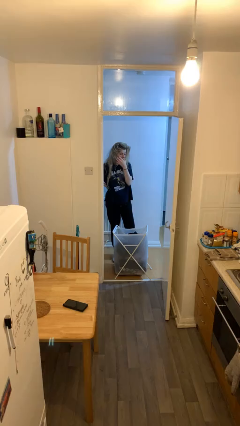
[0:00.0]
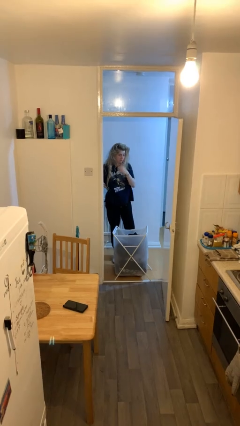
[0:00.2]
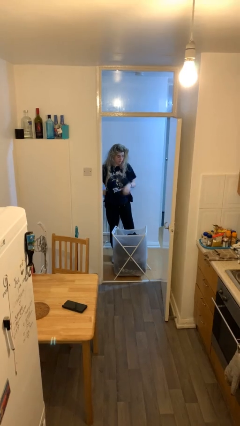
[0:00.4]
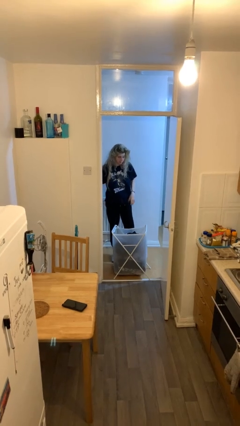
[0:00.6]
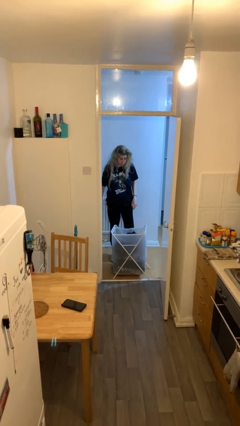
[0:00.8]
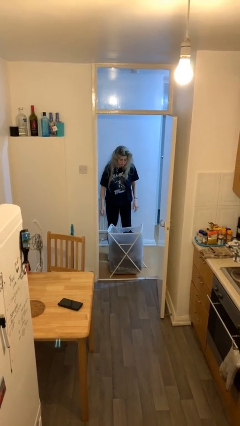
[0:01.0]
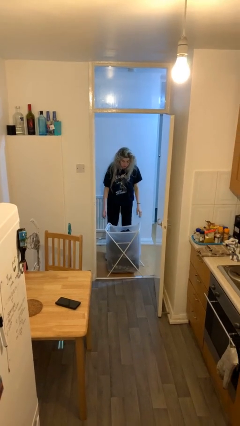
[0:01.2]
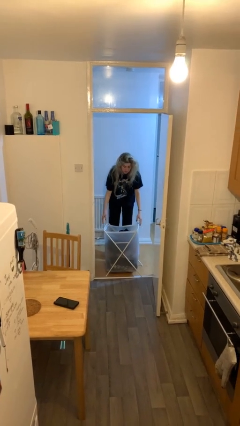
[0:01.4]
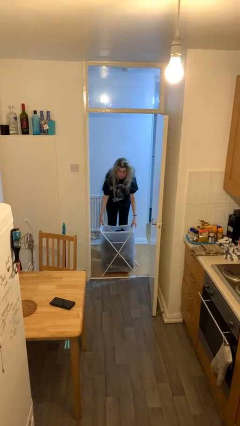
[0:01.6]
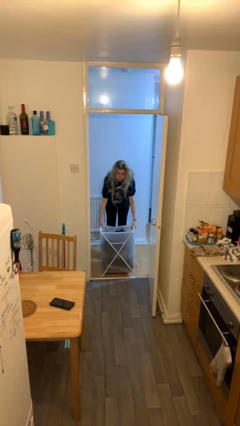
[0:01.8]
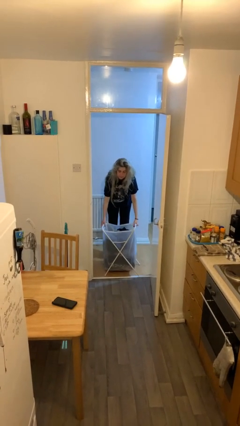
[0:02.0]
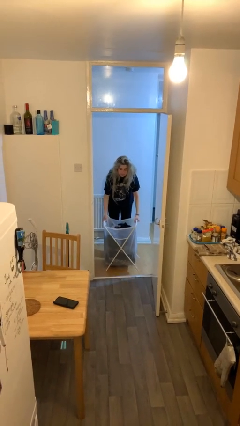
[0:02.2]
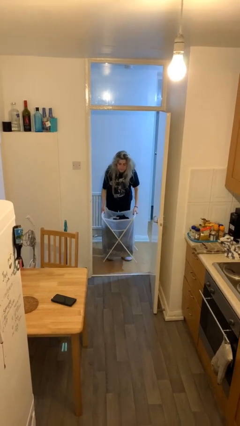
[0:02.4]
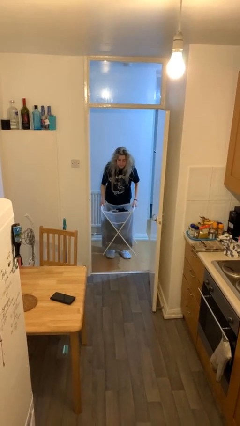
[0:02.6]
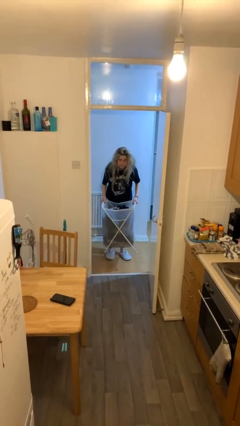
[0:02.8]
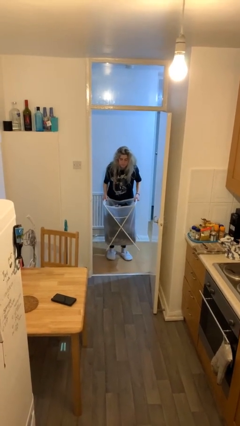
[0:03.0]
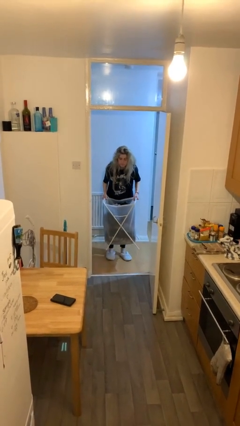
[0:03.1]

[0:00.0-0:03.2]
person picks up object from floor

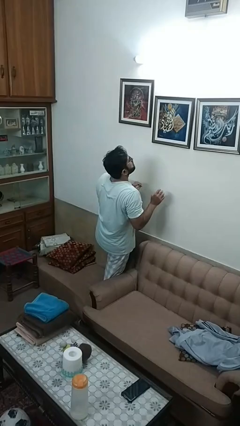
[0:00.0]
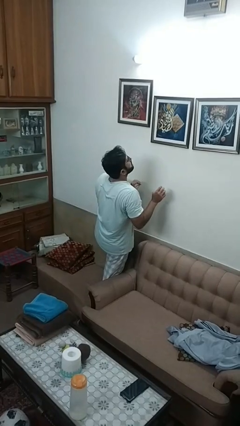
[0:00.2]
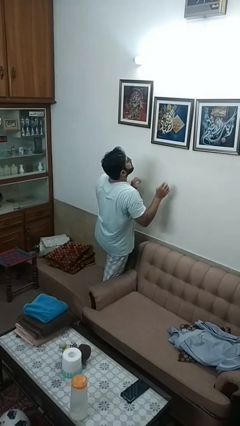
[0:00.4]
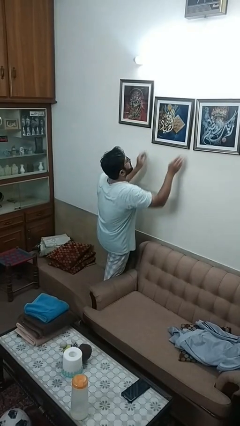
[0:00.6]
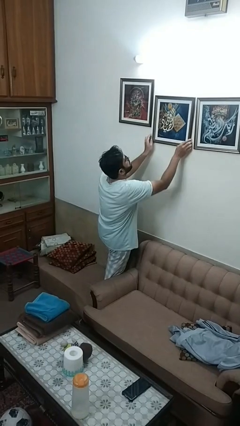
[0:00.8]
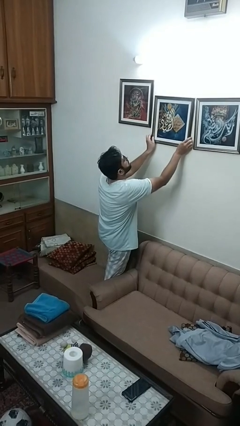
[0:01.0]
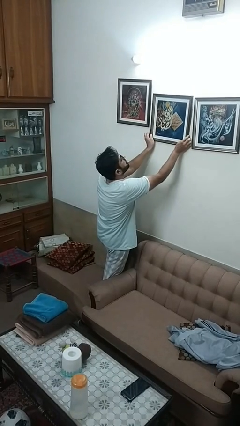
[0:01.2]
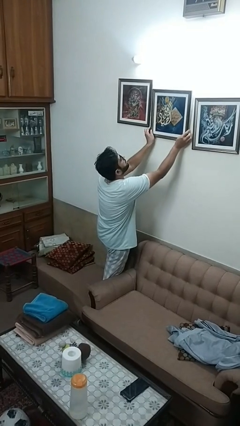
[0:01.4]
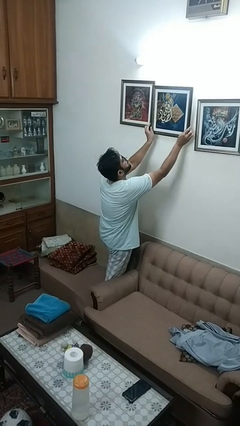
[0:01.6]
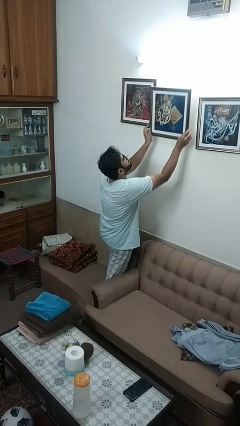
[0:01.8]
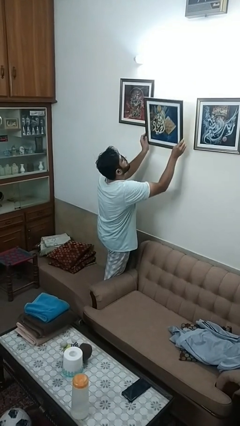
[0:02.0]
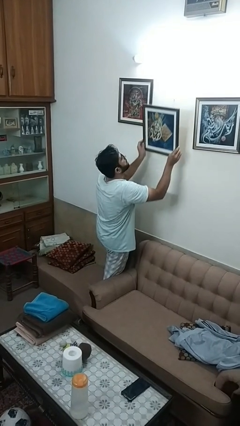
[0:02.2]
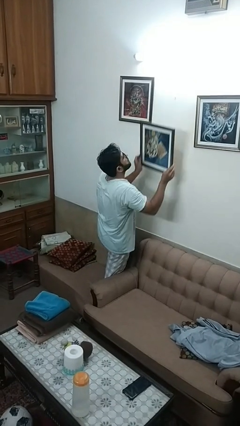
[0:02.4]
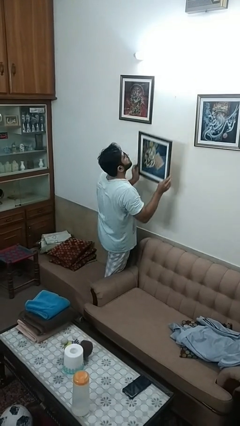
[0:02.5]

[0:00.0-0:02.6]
person takes down picture frame

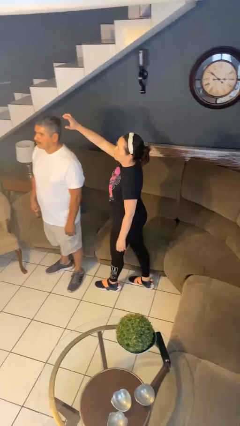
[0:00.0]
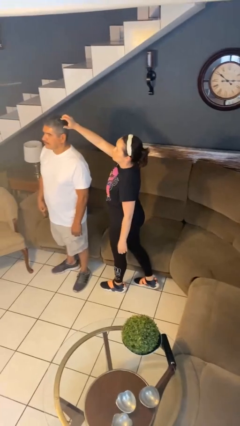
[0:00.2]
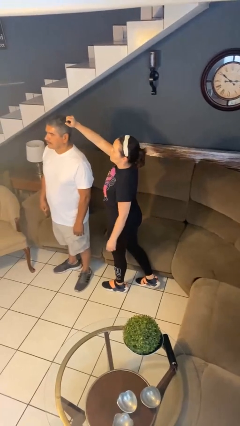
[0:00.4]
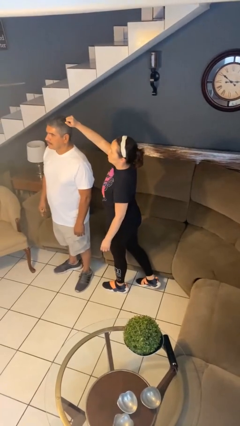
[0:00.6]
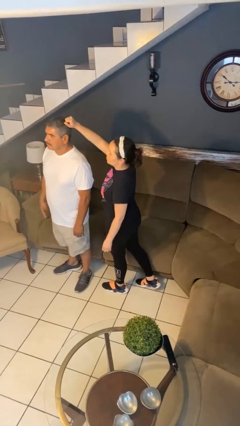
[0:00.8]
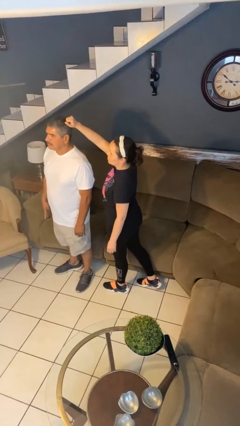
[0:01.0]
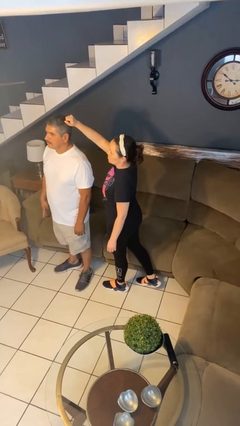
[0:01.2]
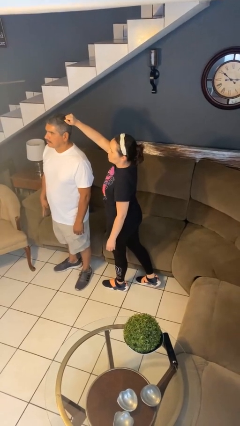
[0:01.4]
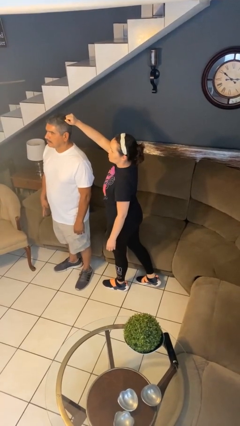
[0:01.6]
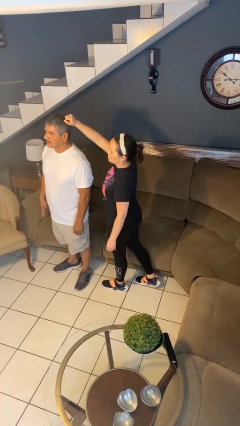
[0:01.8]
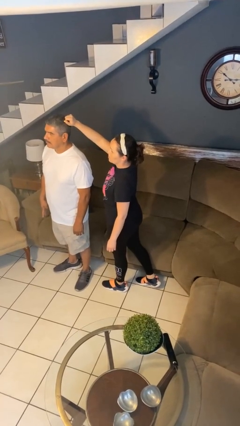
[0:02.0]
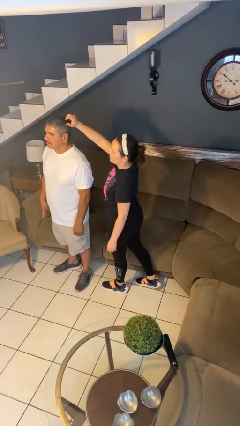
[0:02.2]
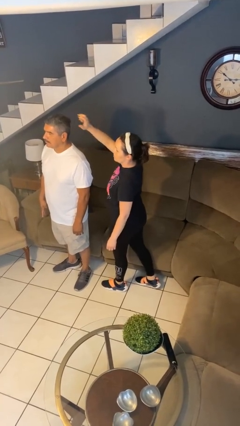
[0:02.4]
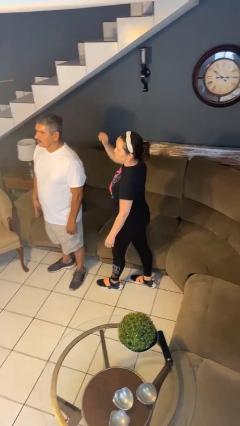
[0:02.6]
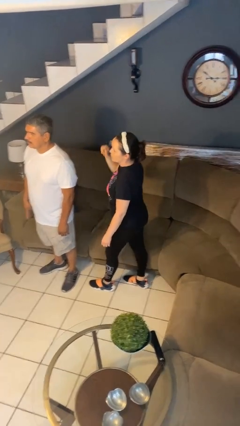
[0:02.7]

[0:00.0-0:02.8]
person grabs person by hair

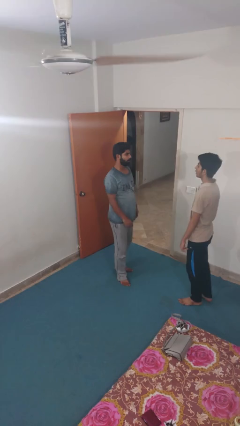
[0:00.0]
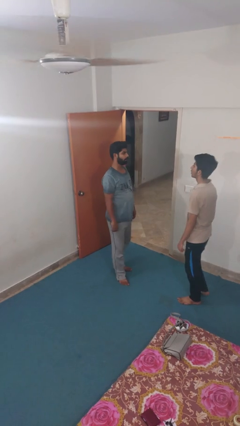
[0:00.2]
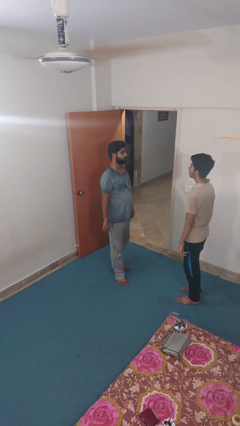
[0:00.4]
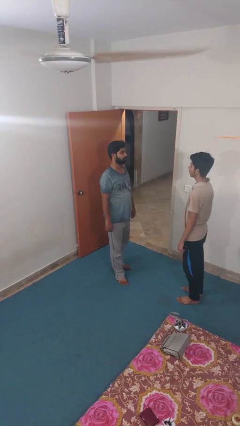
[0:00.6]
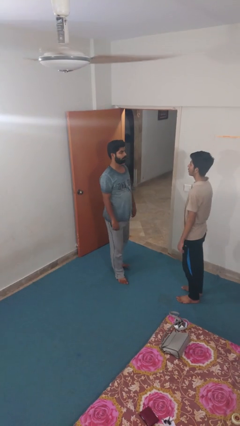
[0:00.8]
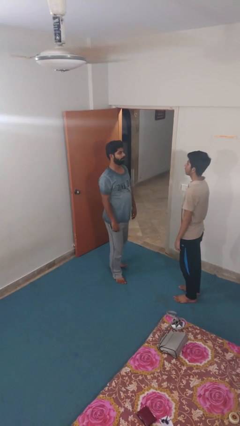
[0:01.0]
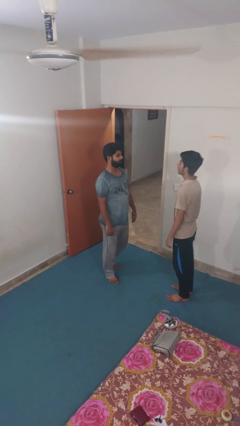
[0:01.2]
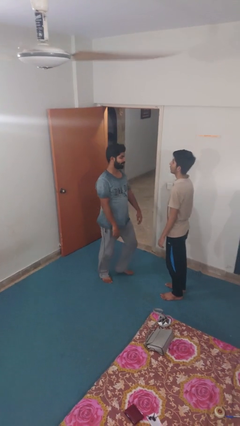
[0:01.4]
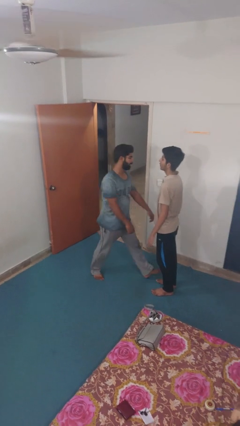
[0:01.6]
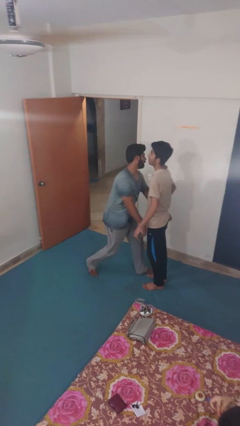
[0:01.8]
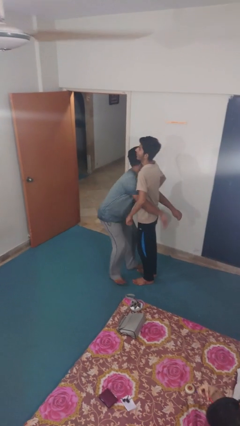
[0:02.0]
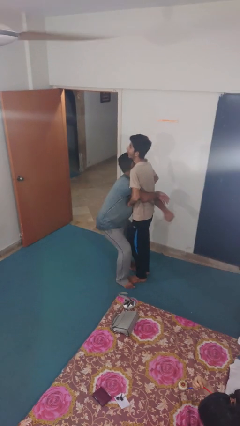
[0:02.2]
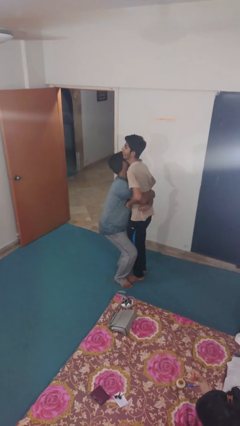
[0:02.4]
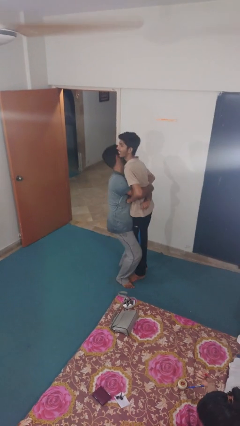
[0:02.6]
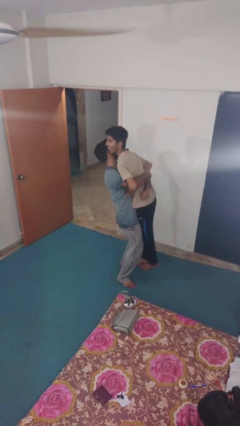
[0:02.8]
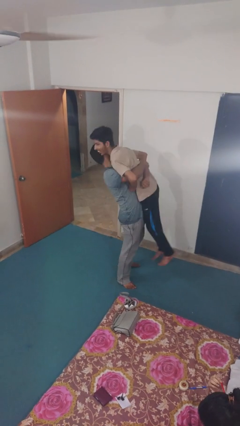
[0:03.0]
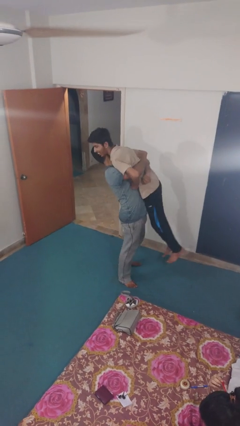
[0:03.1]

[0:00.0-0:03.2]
person picks up person

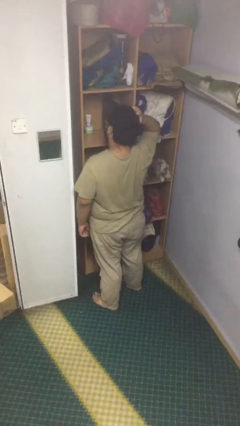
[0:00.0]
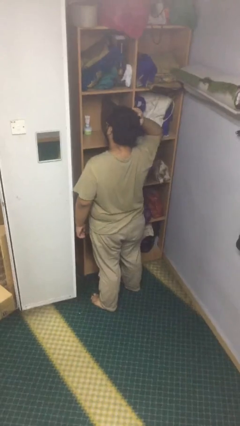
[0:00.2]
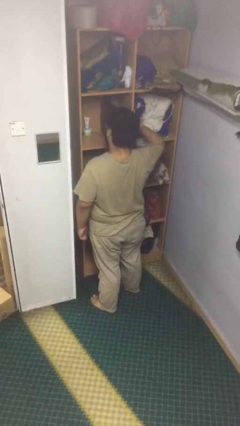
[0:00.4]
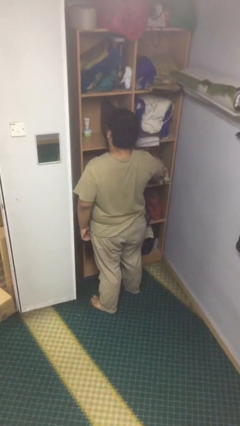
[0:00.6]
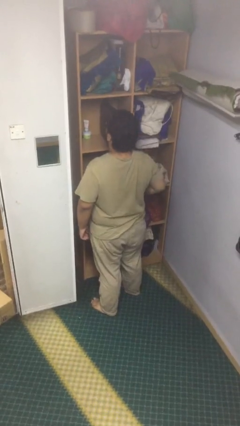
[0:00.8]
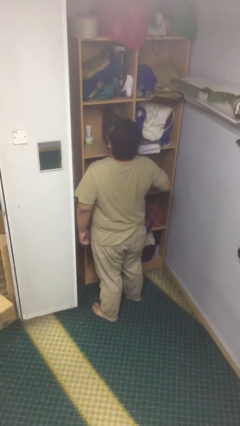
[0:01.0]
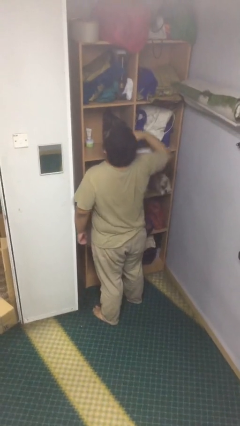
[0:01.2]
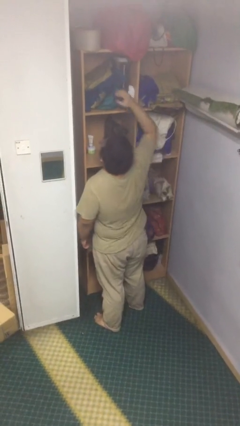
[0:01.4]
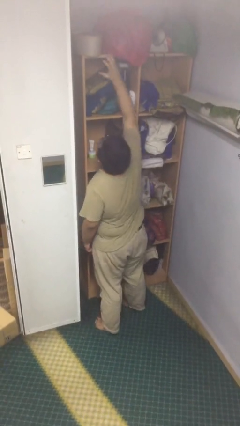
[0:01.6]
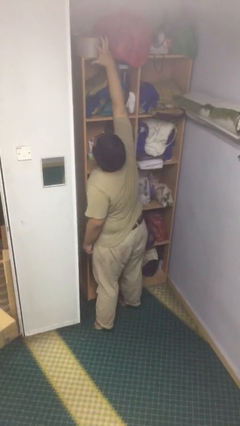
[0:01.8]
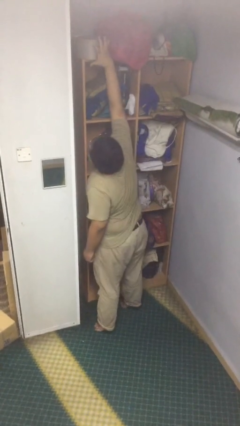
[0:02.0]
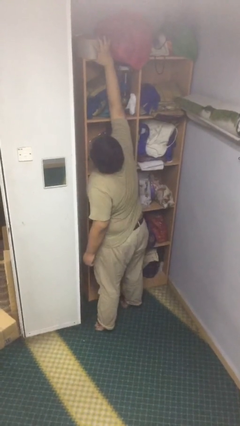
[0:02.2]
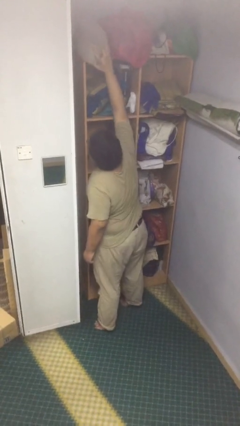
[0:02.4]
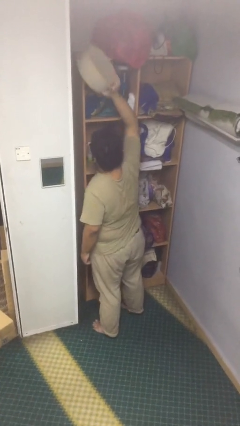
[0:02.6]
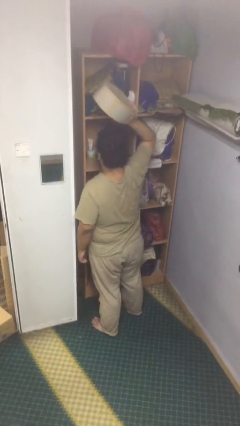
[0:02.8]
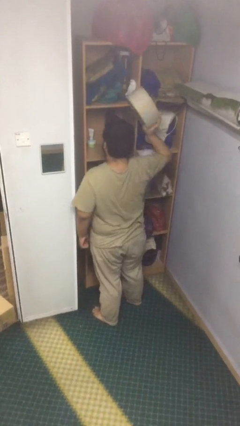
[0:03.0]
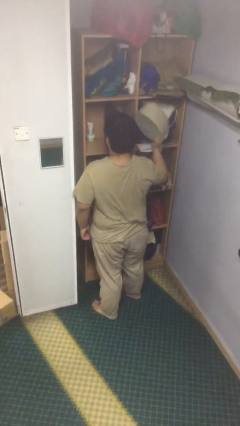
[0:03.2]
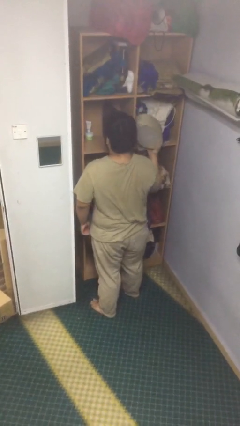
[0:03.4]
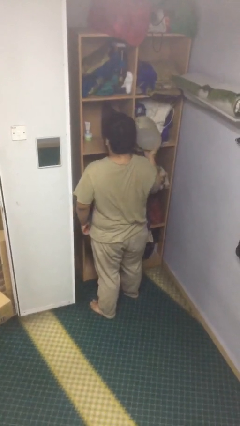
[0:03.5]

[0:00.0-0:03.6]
person picks up object from shelf

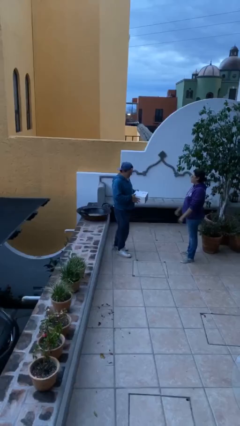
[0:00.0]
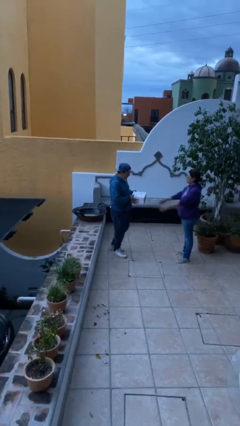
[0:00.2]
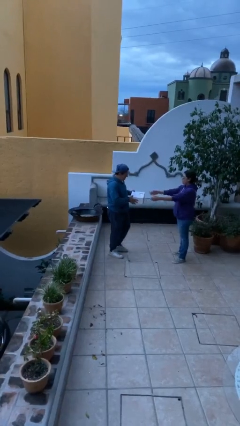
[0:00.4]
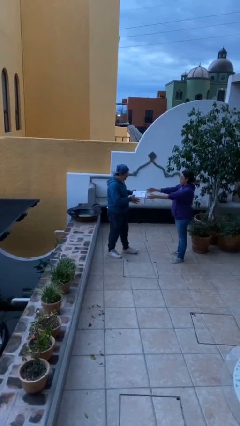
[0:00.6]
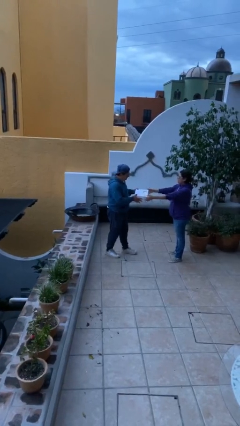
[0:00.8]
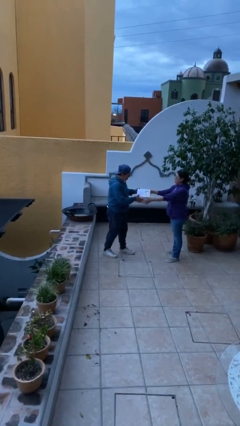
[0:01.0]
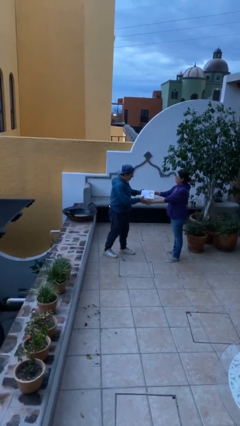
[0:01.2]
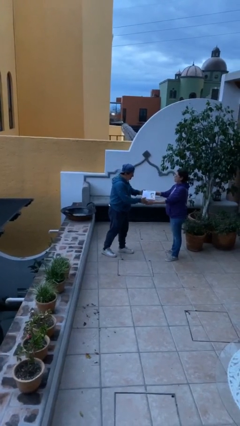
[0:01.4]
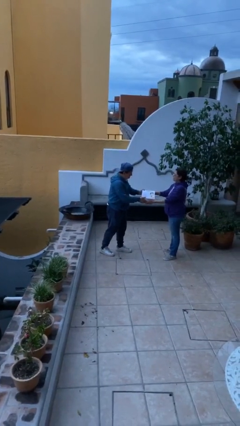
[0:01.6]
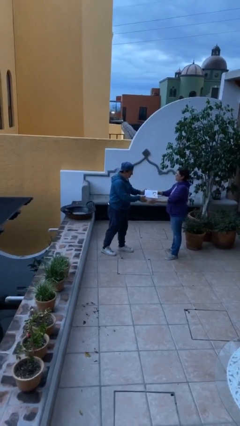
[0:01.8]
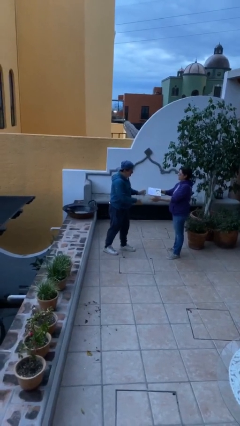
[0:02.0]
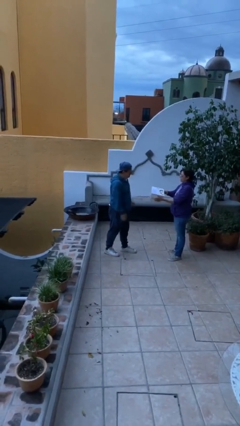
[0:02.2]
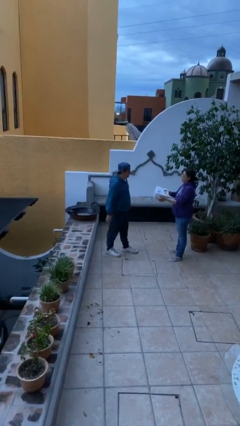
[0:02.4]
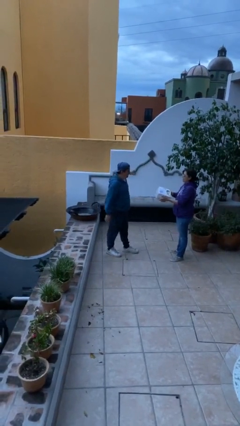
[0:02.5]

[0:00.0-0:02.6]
person transfers object to person
